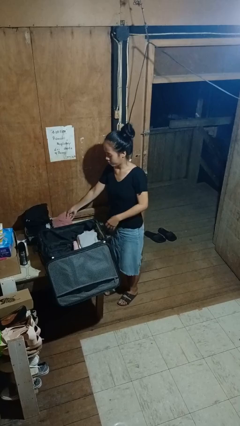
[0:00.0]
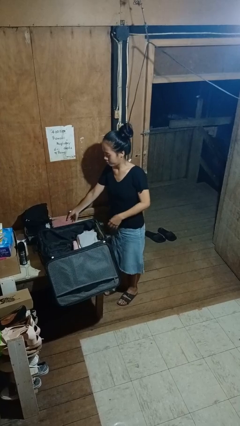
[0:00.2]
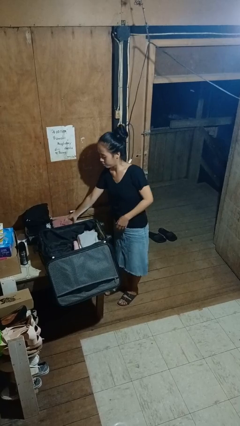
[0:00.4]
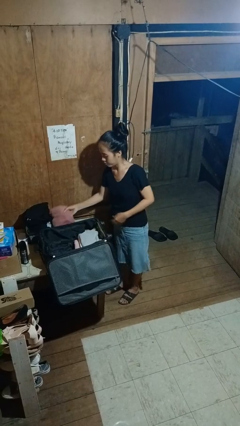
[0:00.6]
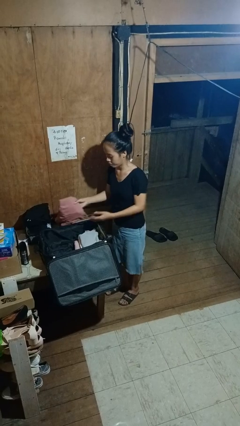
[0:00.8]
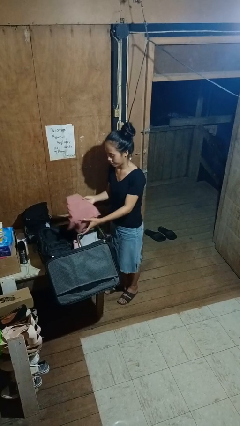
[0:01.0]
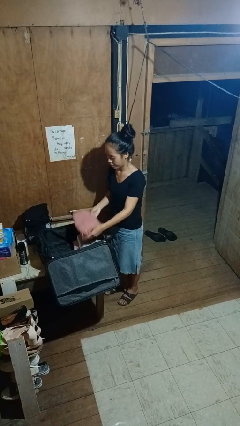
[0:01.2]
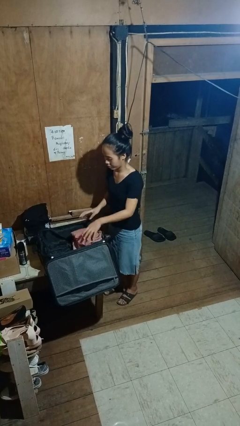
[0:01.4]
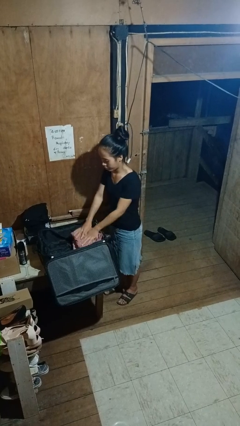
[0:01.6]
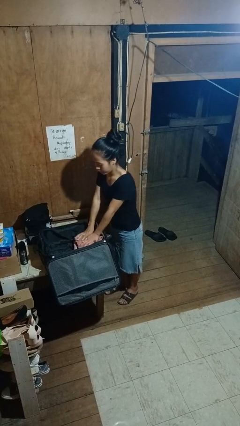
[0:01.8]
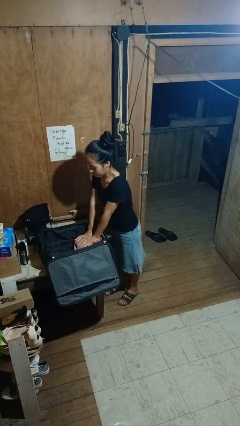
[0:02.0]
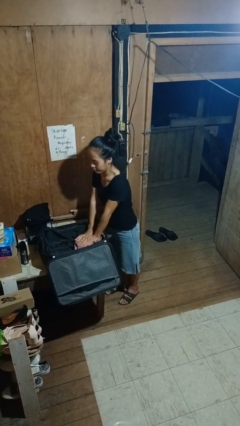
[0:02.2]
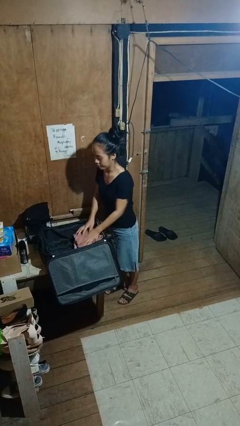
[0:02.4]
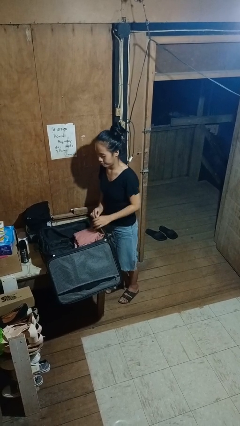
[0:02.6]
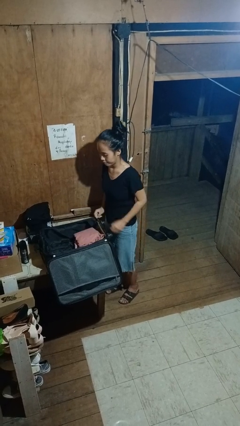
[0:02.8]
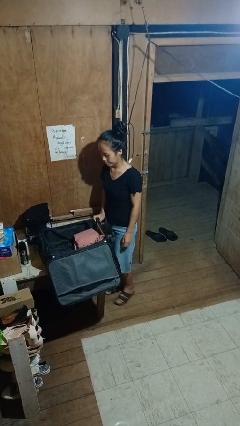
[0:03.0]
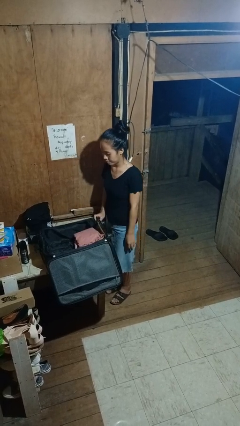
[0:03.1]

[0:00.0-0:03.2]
person loads clothes into suitcase

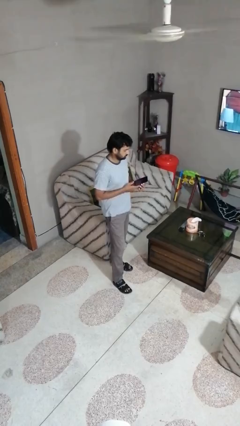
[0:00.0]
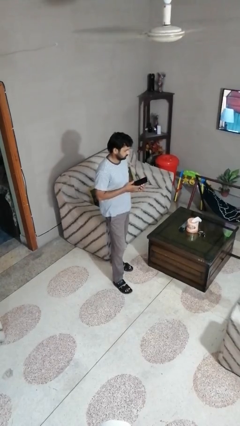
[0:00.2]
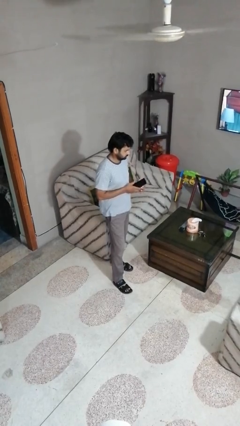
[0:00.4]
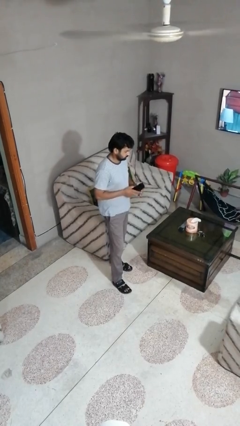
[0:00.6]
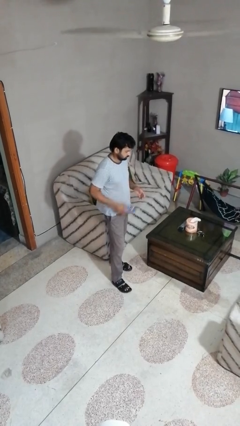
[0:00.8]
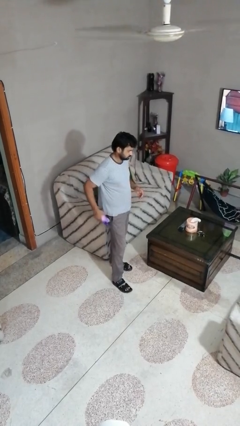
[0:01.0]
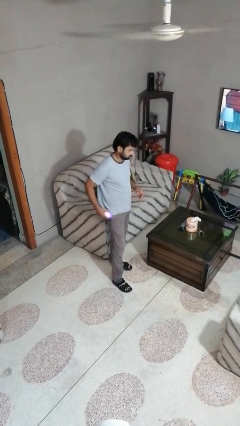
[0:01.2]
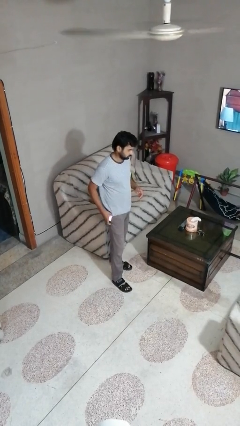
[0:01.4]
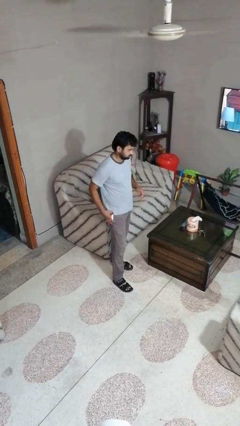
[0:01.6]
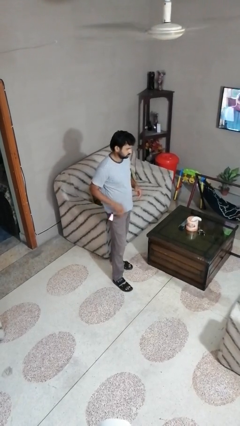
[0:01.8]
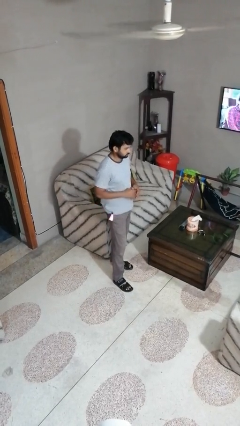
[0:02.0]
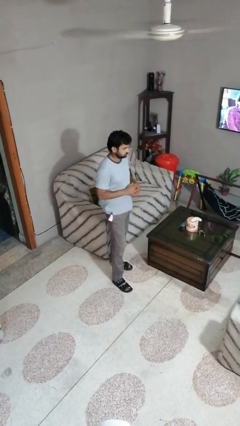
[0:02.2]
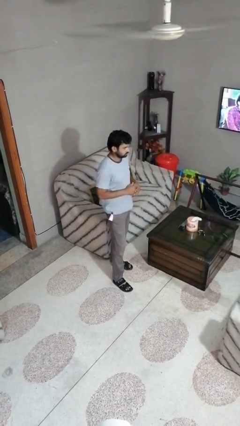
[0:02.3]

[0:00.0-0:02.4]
person puts phone into pocket

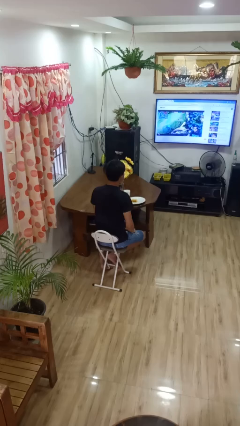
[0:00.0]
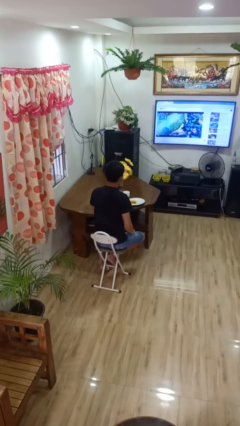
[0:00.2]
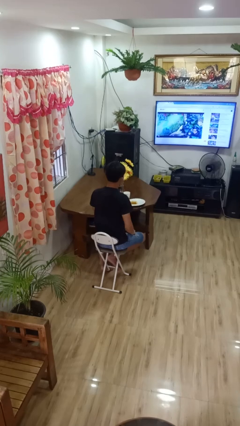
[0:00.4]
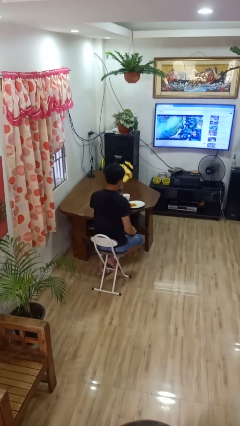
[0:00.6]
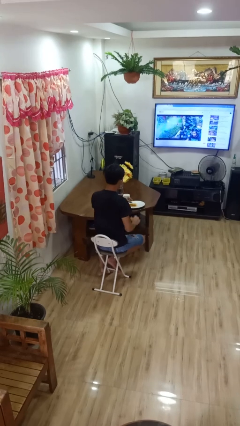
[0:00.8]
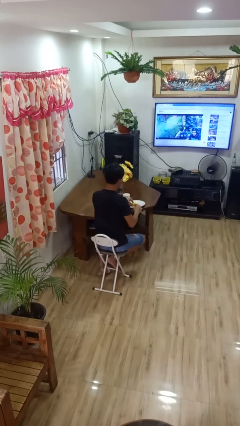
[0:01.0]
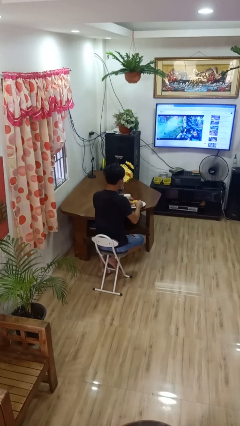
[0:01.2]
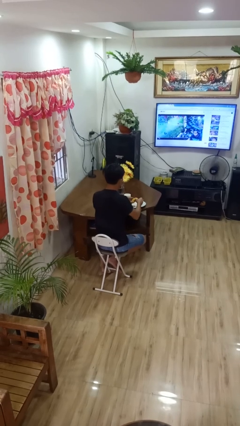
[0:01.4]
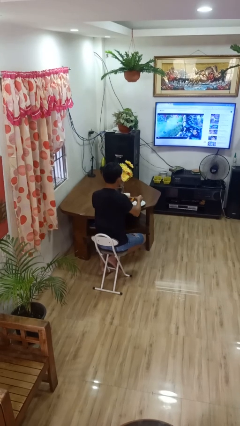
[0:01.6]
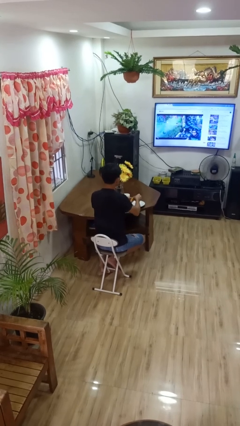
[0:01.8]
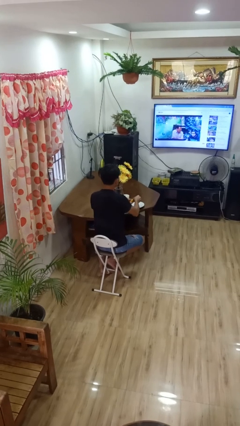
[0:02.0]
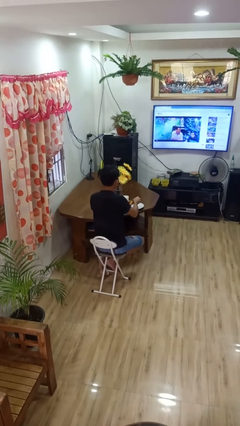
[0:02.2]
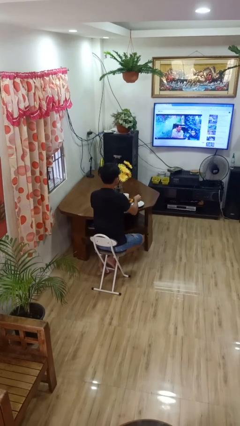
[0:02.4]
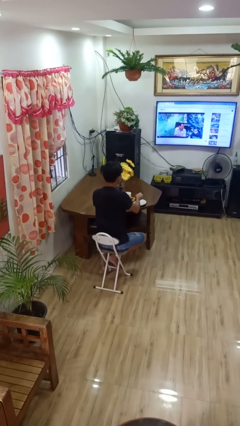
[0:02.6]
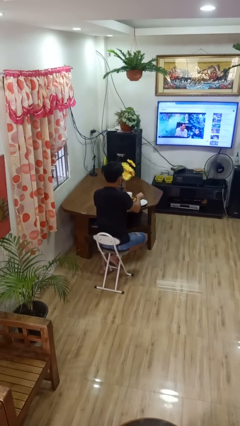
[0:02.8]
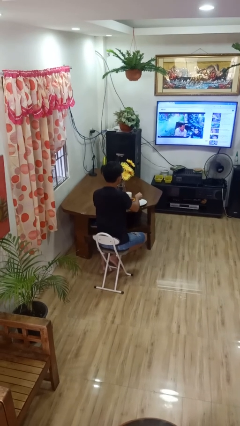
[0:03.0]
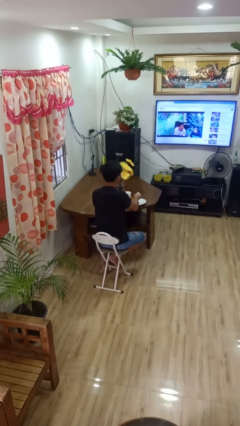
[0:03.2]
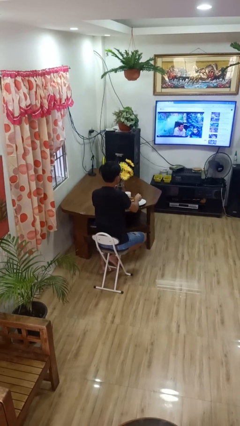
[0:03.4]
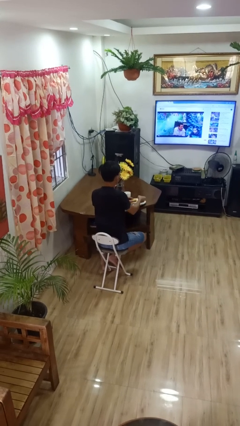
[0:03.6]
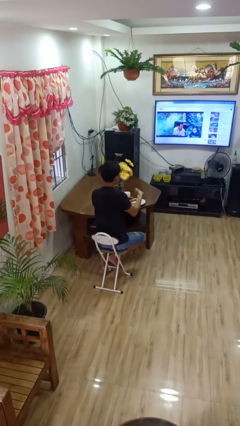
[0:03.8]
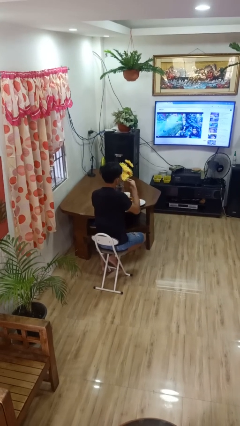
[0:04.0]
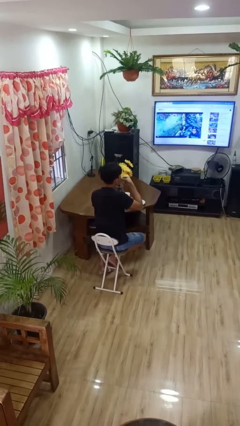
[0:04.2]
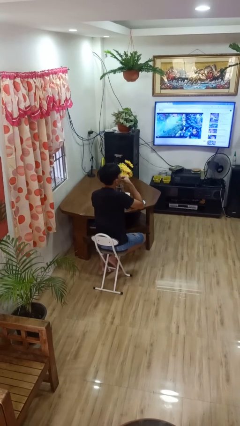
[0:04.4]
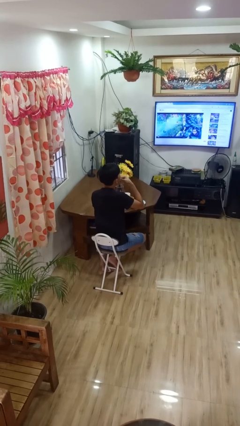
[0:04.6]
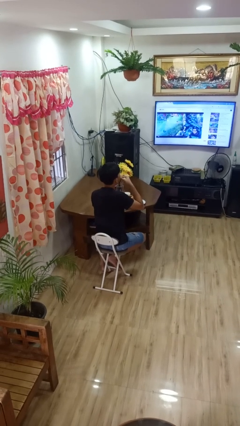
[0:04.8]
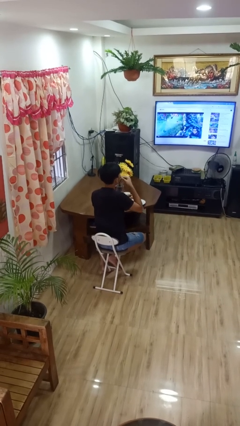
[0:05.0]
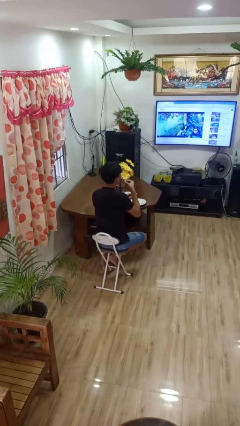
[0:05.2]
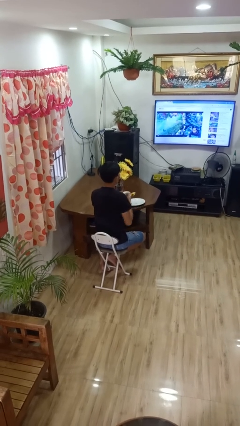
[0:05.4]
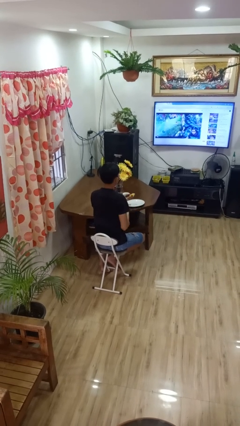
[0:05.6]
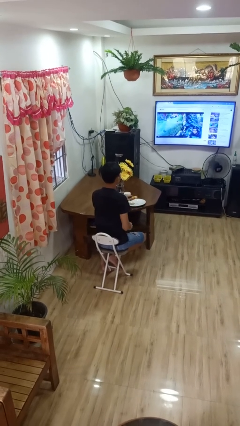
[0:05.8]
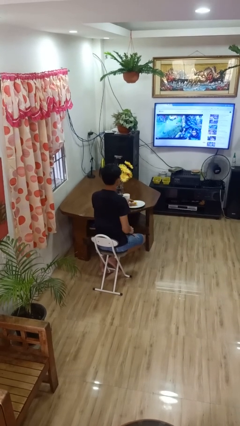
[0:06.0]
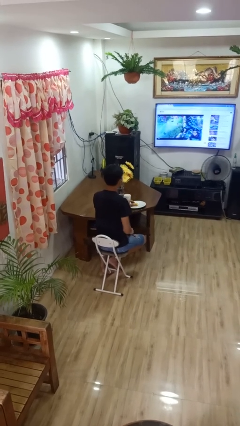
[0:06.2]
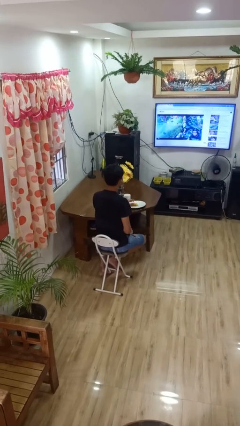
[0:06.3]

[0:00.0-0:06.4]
person eats with hands

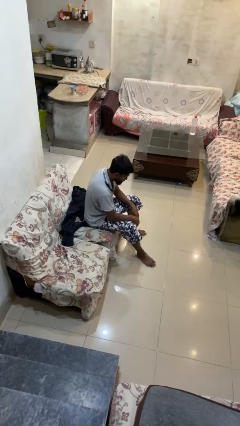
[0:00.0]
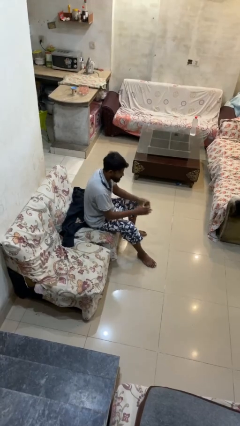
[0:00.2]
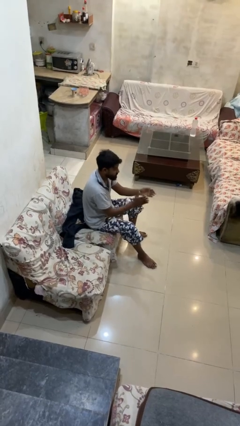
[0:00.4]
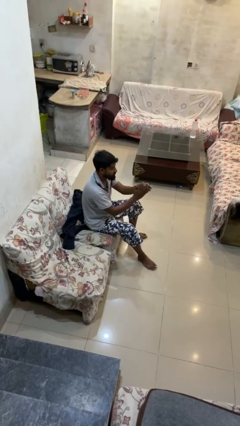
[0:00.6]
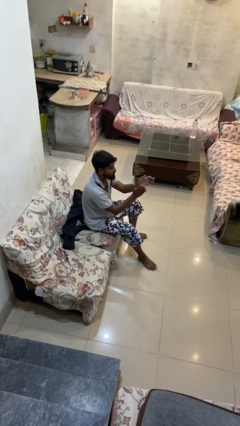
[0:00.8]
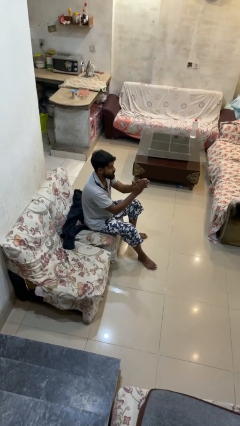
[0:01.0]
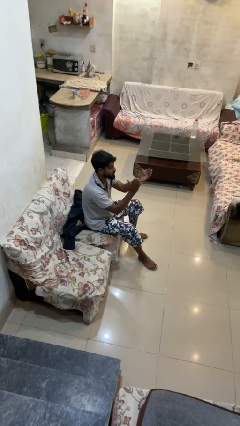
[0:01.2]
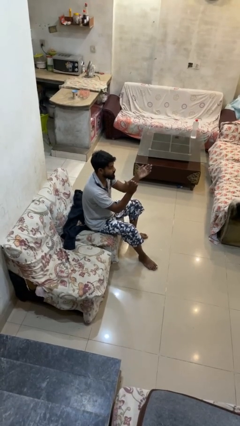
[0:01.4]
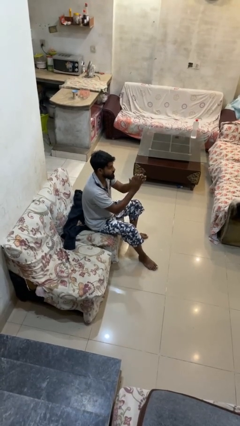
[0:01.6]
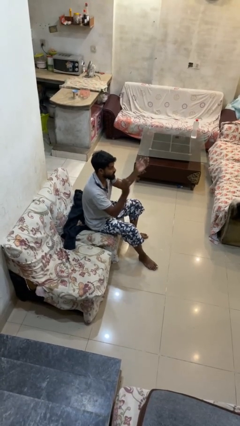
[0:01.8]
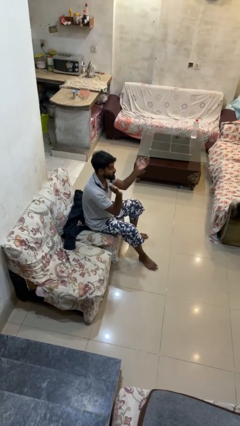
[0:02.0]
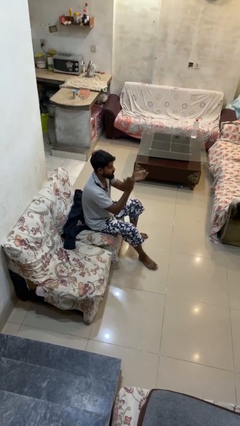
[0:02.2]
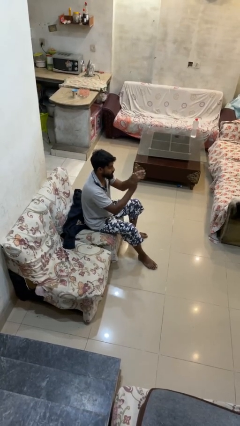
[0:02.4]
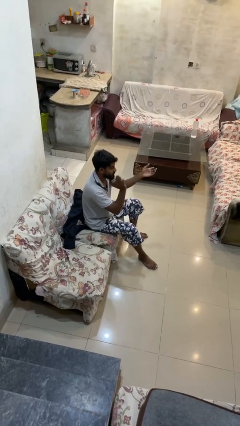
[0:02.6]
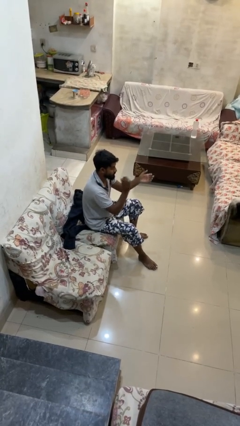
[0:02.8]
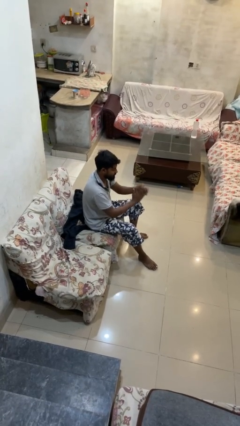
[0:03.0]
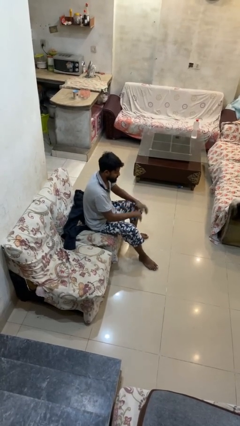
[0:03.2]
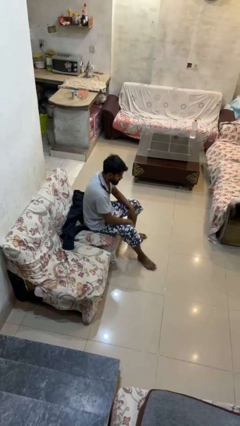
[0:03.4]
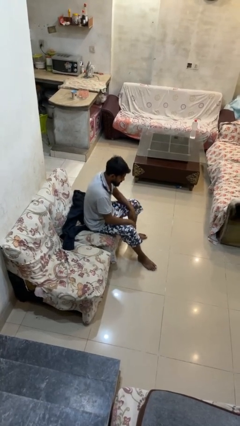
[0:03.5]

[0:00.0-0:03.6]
person claps hands

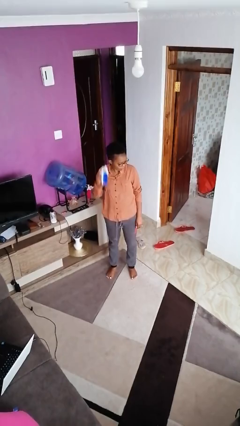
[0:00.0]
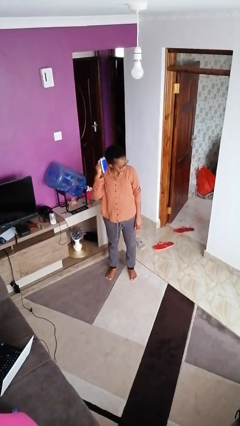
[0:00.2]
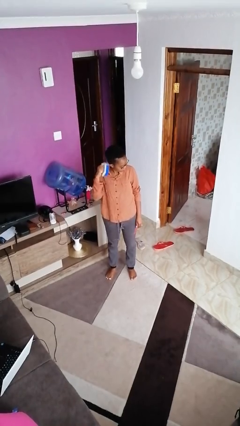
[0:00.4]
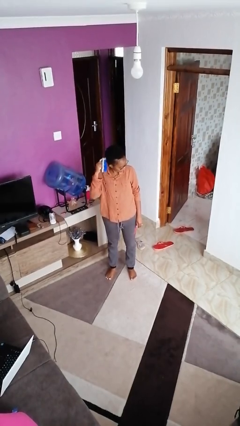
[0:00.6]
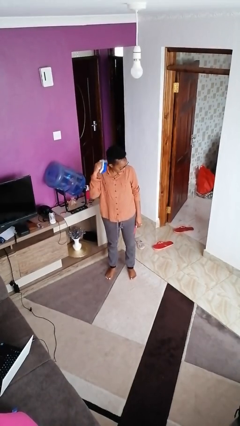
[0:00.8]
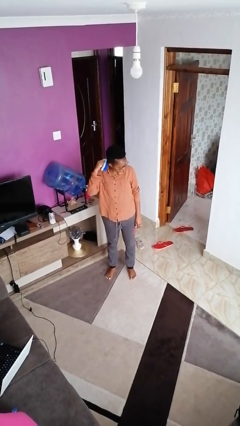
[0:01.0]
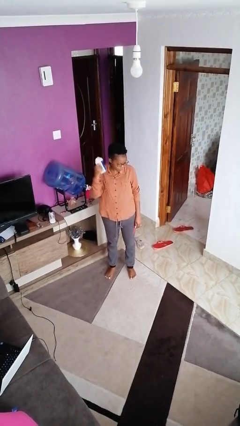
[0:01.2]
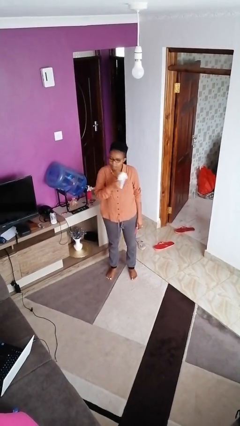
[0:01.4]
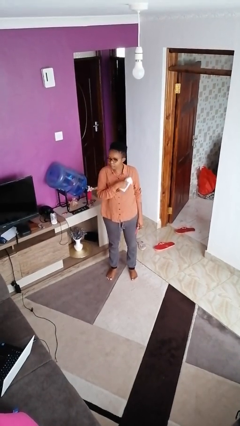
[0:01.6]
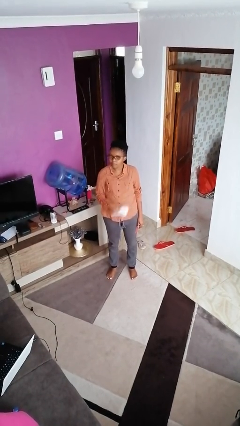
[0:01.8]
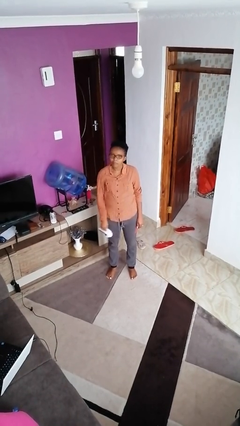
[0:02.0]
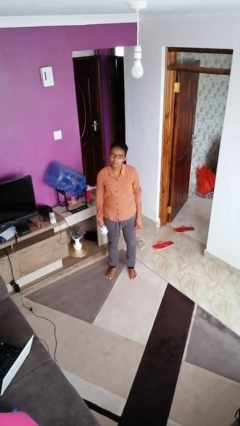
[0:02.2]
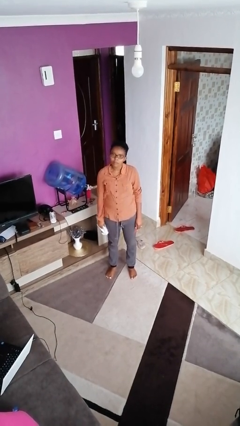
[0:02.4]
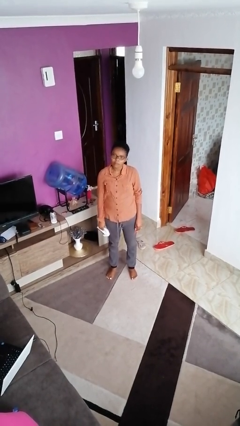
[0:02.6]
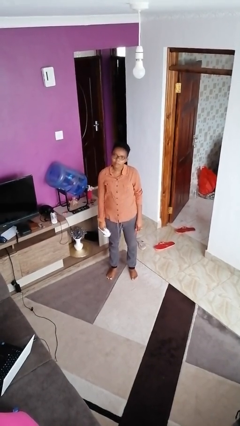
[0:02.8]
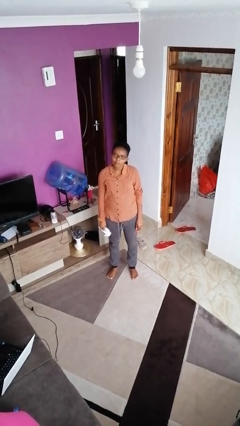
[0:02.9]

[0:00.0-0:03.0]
person brushes hair
